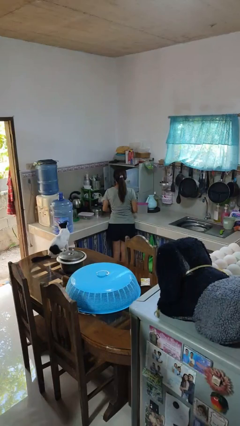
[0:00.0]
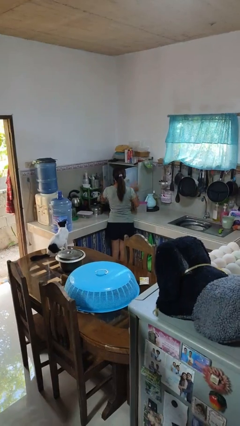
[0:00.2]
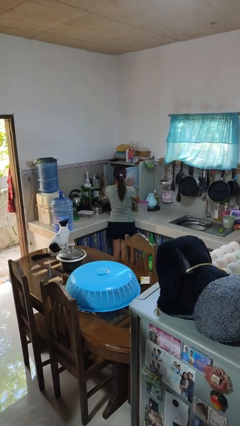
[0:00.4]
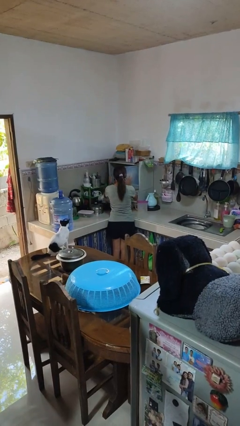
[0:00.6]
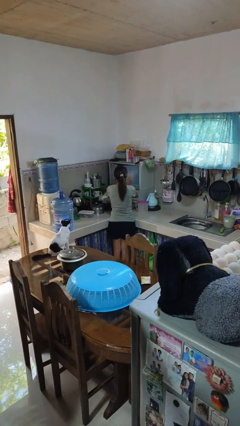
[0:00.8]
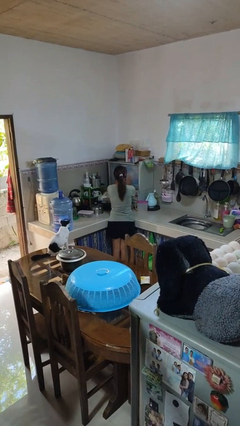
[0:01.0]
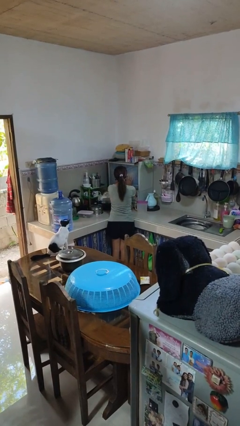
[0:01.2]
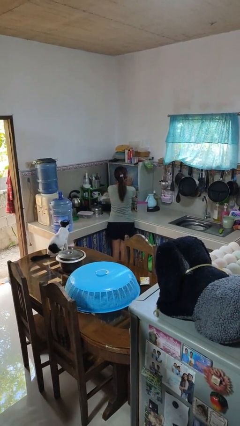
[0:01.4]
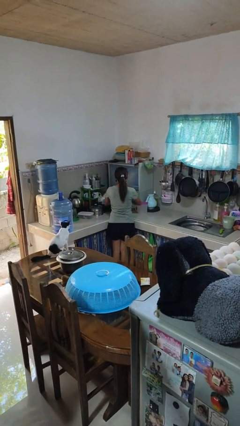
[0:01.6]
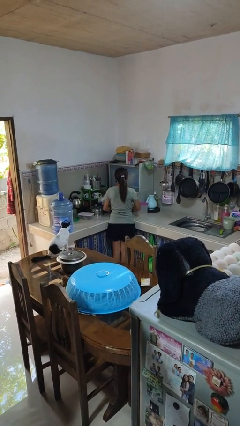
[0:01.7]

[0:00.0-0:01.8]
person closes kitchen drawer

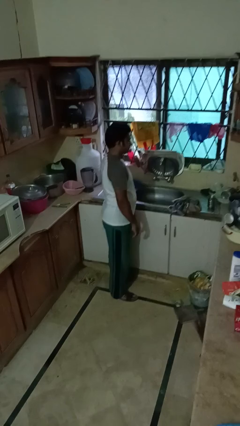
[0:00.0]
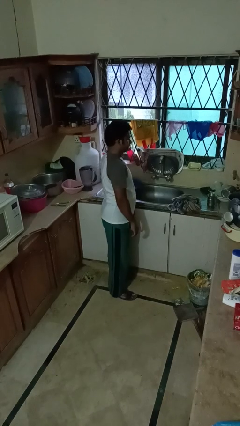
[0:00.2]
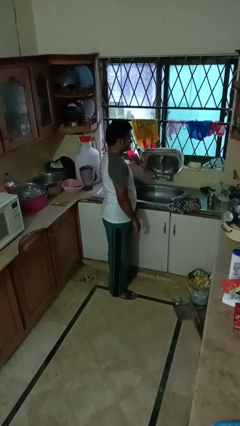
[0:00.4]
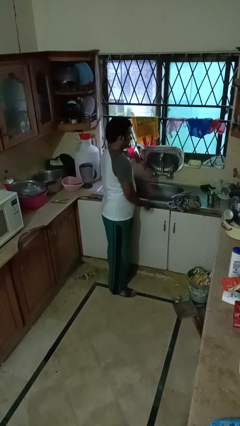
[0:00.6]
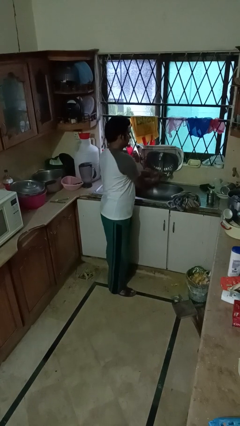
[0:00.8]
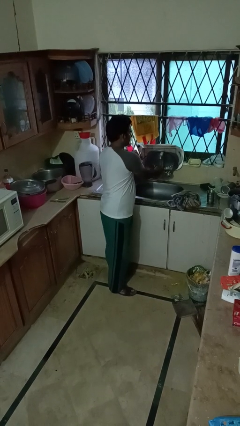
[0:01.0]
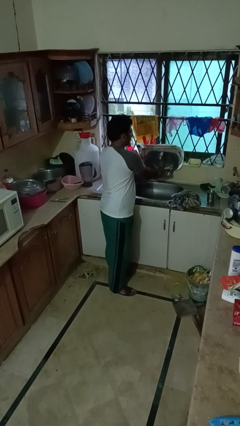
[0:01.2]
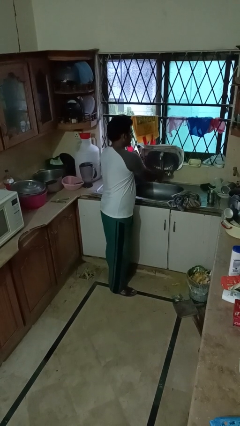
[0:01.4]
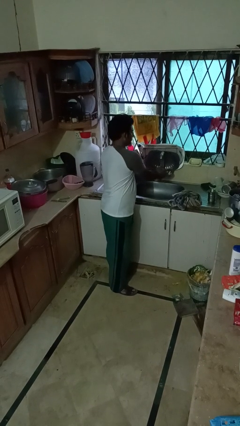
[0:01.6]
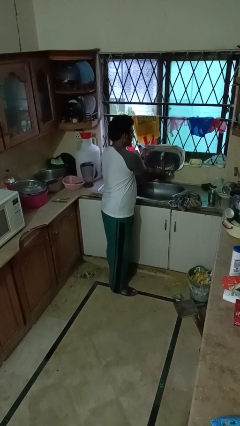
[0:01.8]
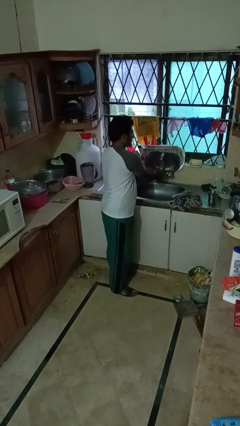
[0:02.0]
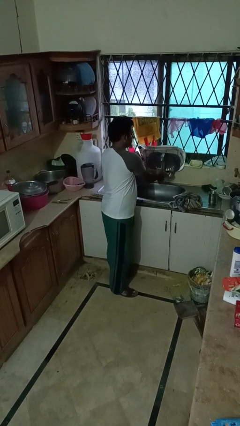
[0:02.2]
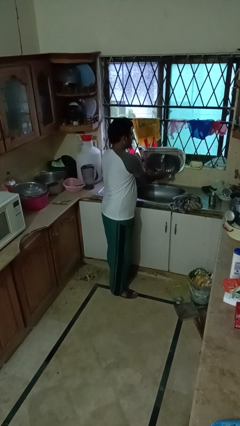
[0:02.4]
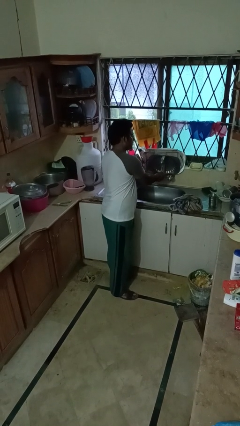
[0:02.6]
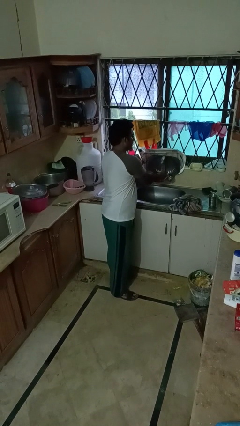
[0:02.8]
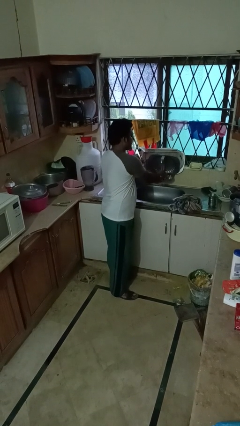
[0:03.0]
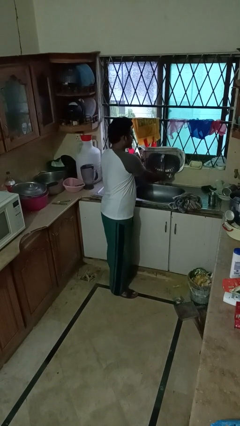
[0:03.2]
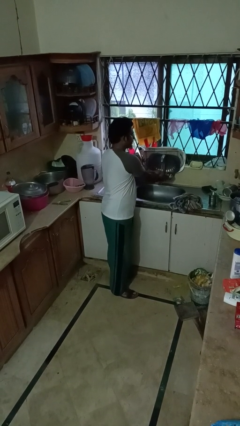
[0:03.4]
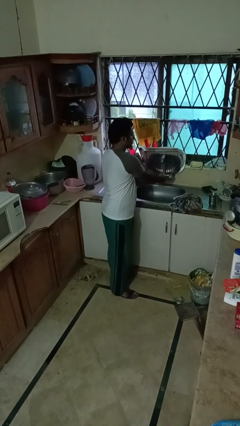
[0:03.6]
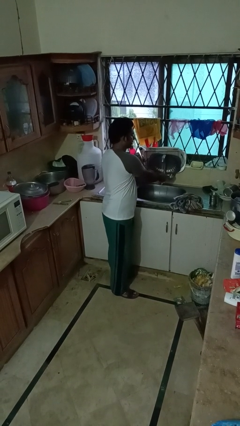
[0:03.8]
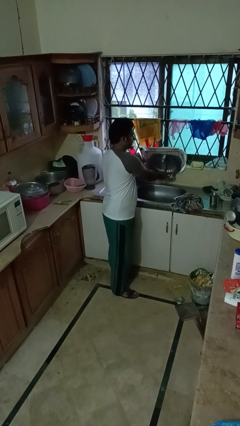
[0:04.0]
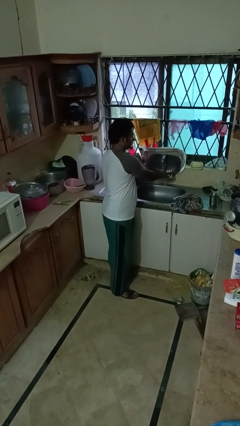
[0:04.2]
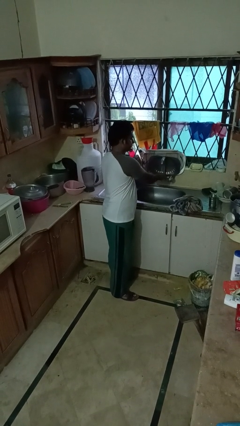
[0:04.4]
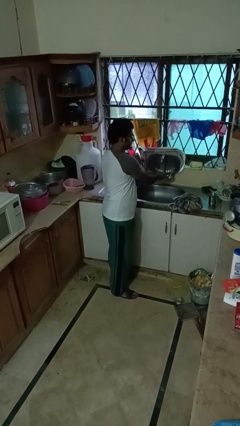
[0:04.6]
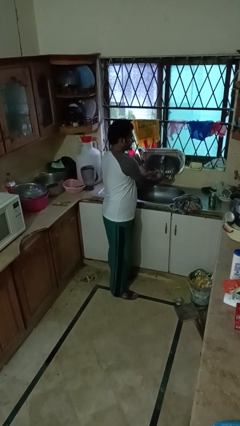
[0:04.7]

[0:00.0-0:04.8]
person washes hands

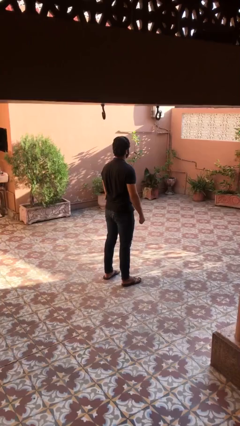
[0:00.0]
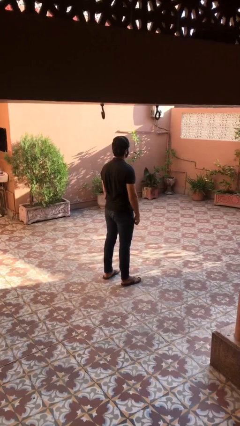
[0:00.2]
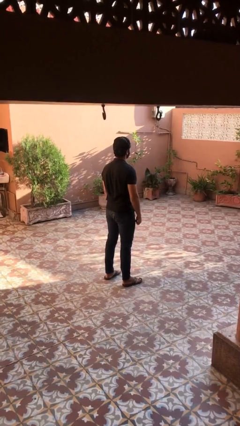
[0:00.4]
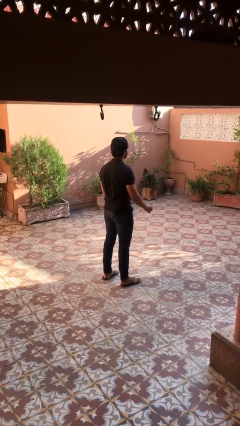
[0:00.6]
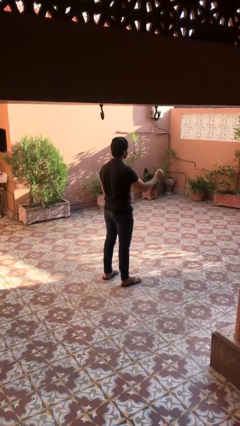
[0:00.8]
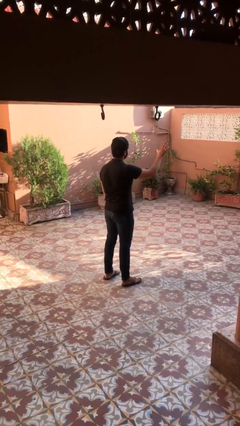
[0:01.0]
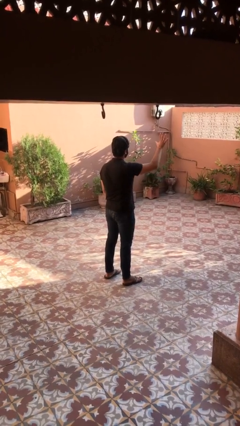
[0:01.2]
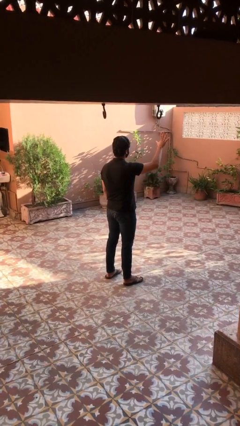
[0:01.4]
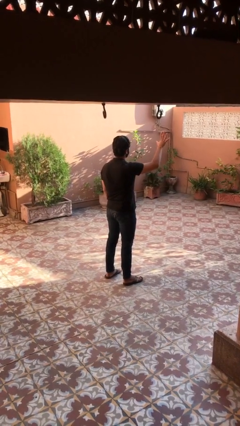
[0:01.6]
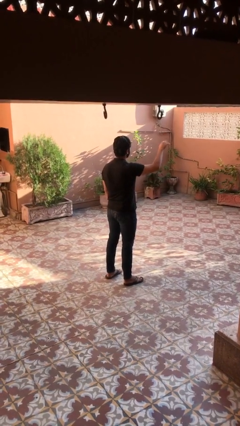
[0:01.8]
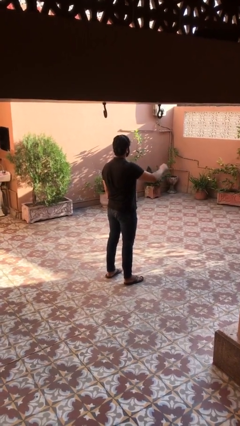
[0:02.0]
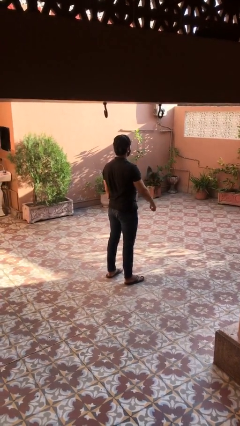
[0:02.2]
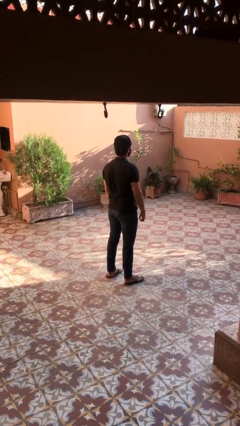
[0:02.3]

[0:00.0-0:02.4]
person gestures number five

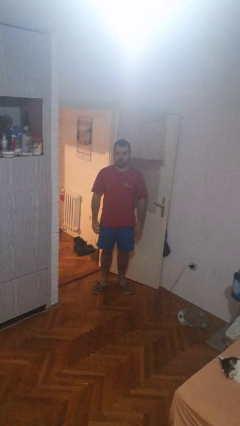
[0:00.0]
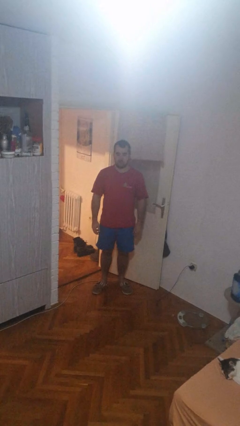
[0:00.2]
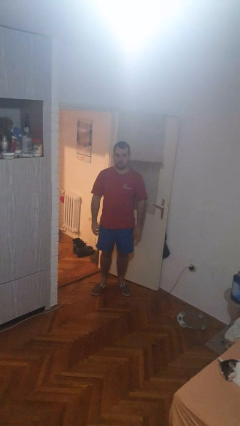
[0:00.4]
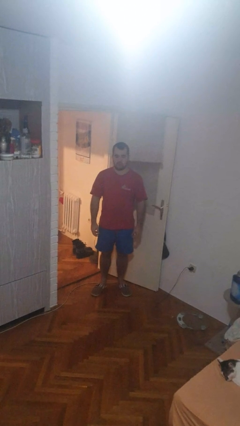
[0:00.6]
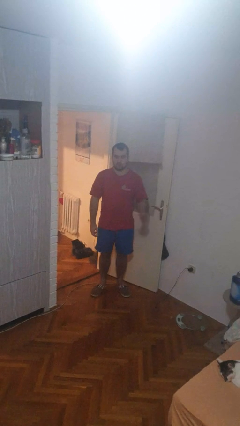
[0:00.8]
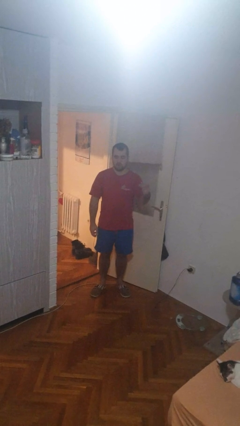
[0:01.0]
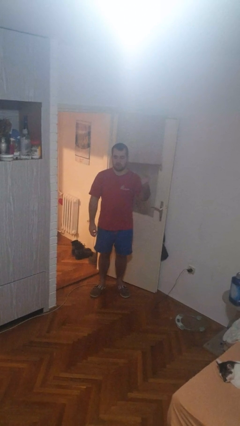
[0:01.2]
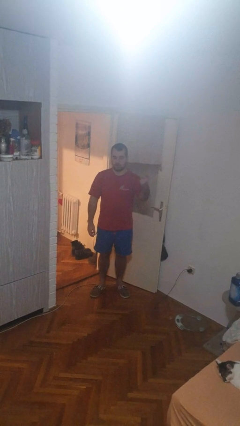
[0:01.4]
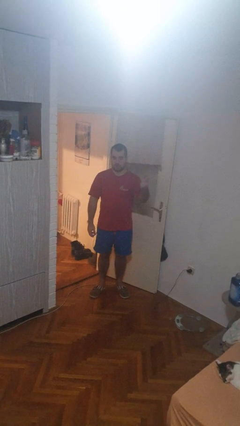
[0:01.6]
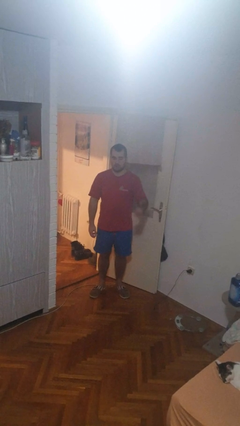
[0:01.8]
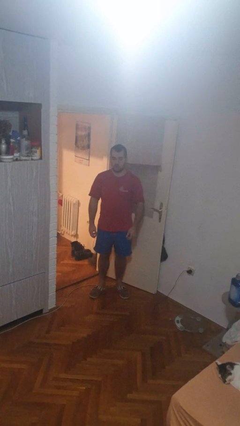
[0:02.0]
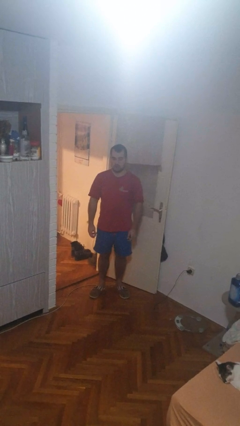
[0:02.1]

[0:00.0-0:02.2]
person snaps fingers

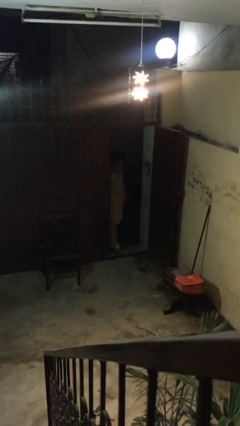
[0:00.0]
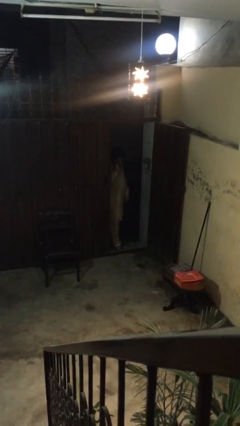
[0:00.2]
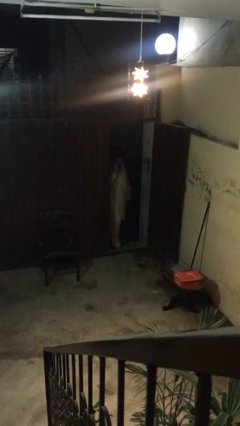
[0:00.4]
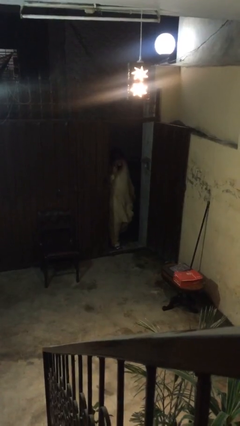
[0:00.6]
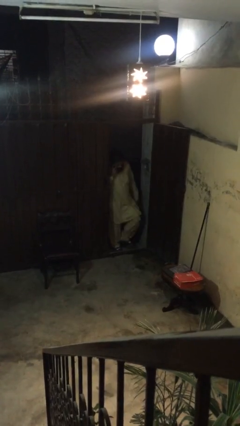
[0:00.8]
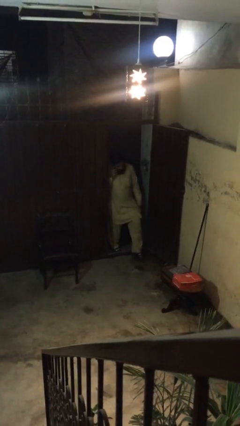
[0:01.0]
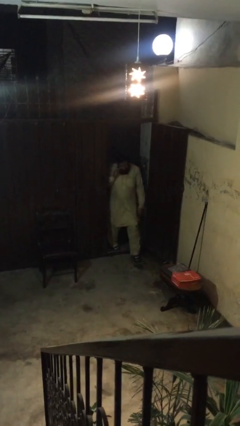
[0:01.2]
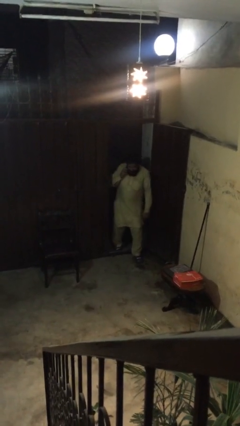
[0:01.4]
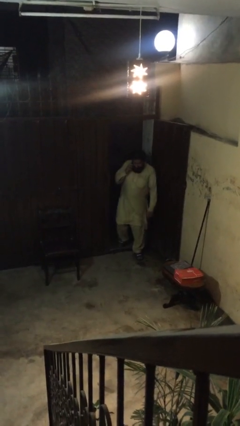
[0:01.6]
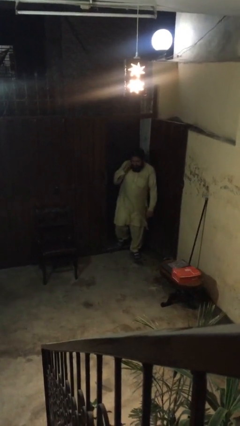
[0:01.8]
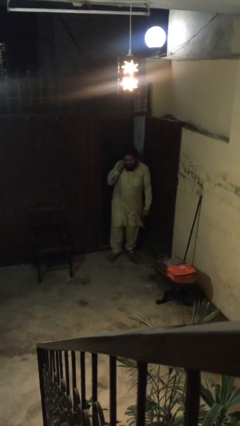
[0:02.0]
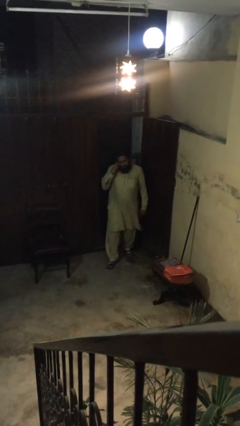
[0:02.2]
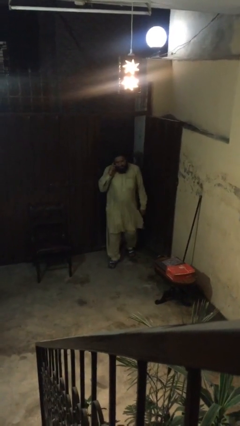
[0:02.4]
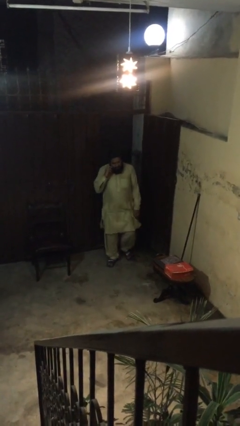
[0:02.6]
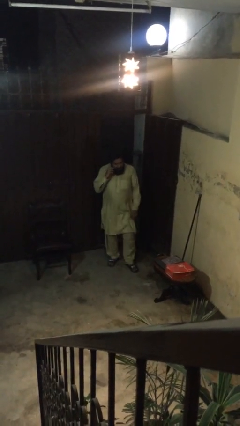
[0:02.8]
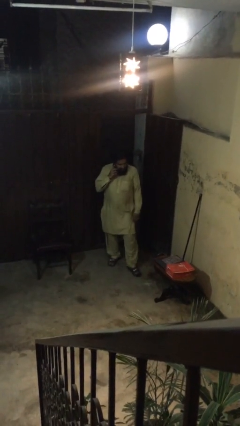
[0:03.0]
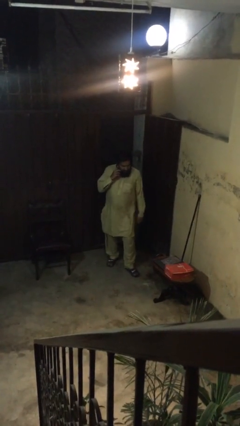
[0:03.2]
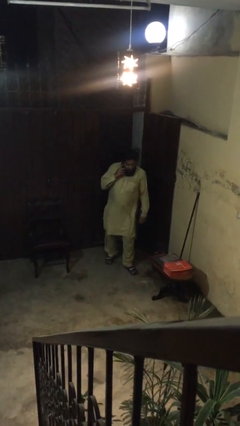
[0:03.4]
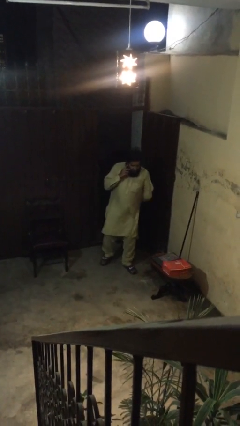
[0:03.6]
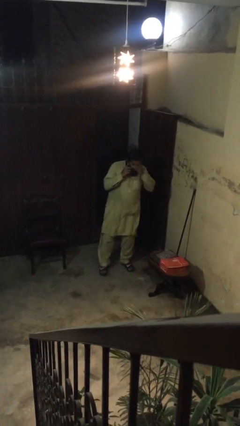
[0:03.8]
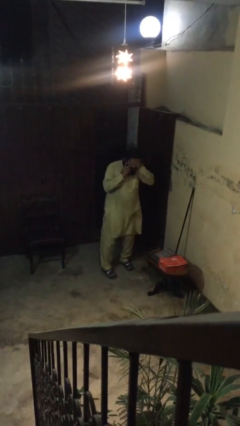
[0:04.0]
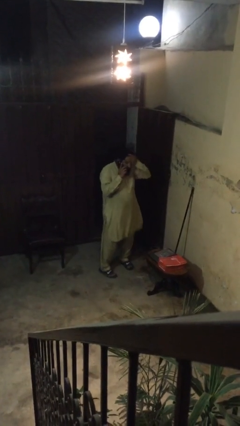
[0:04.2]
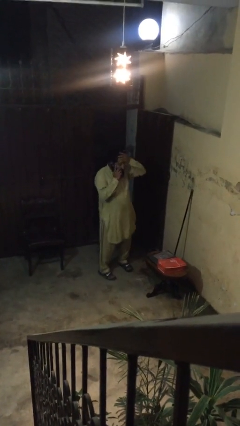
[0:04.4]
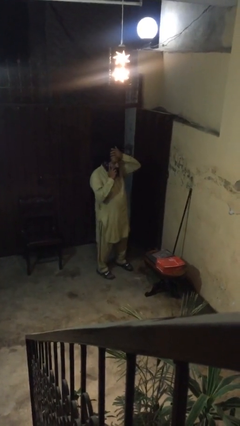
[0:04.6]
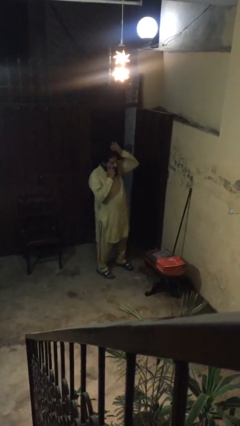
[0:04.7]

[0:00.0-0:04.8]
person enters scene through structure

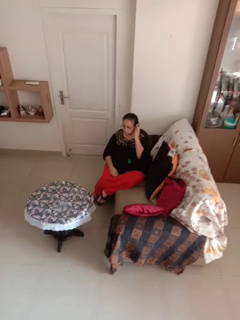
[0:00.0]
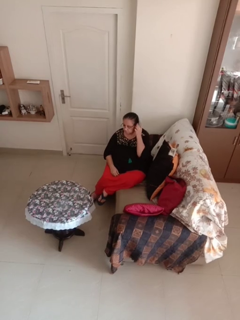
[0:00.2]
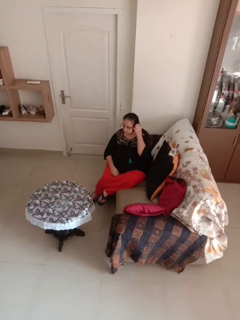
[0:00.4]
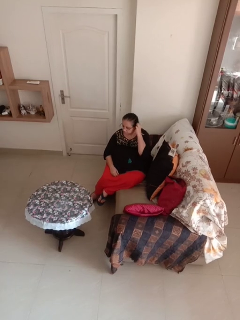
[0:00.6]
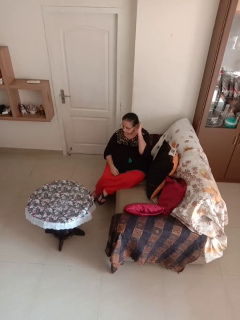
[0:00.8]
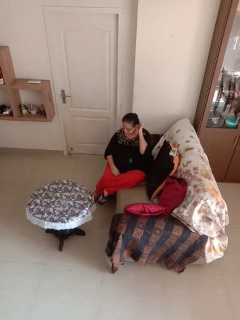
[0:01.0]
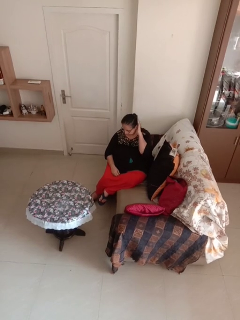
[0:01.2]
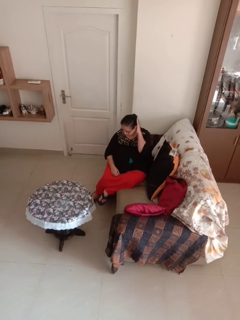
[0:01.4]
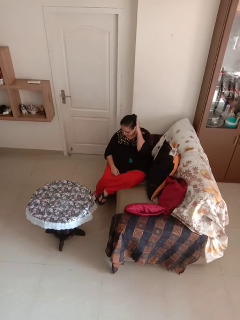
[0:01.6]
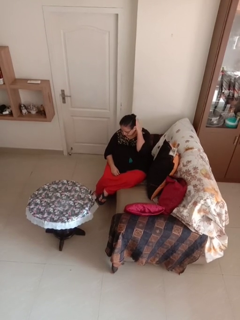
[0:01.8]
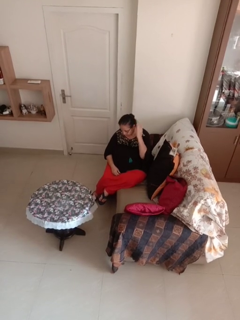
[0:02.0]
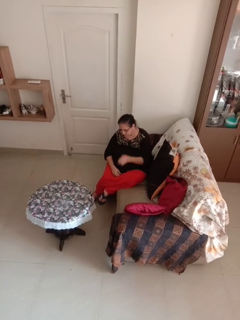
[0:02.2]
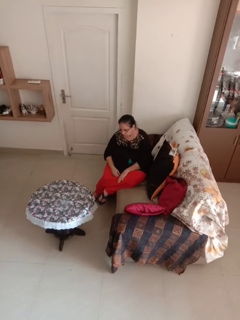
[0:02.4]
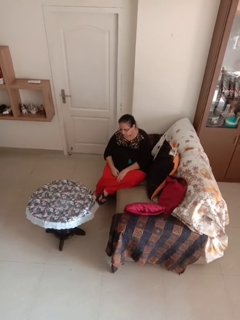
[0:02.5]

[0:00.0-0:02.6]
person strokes hair
